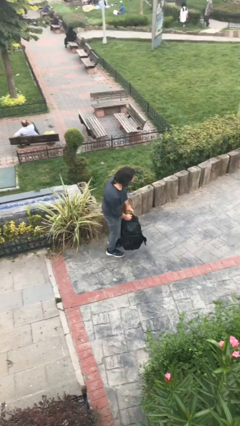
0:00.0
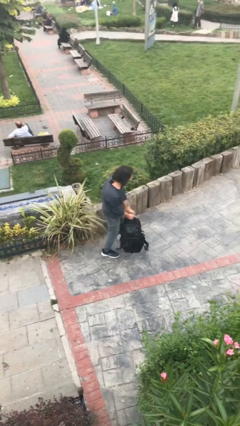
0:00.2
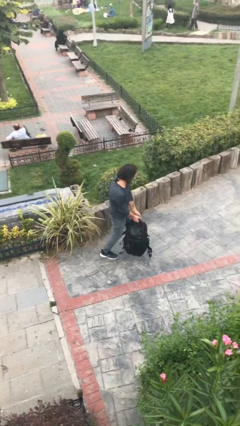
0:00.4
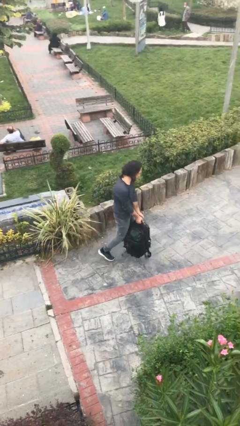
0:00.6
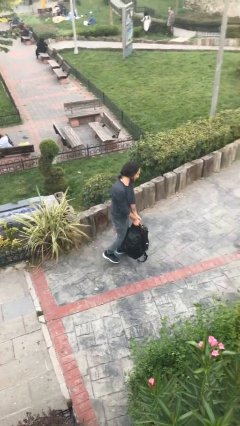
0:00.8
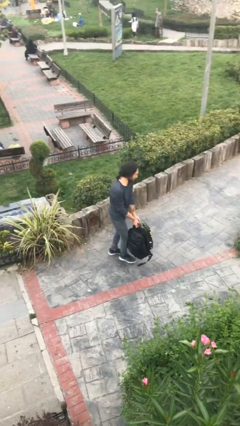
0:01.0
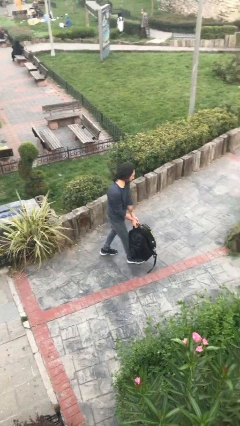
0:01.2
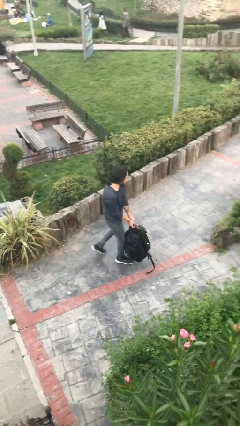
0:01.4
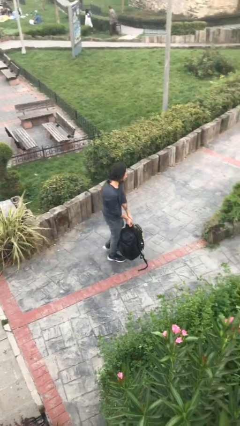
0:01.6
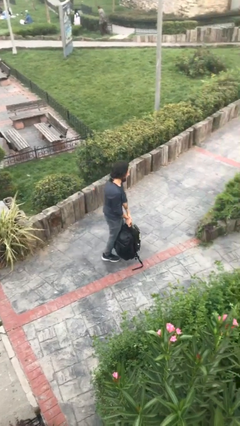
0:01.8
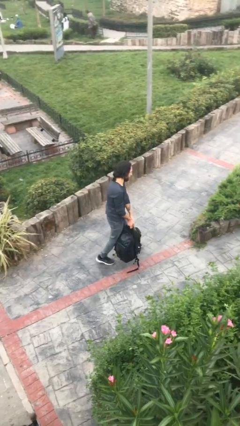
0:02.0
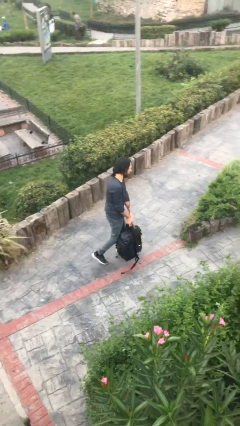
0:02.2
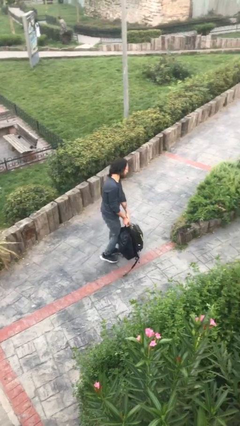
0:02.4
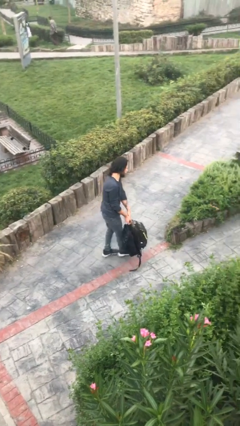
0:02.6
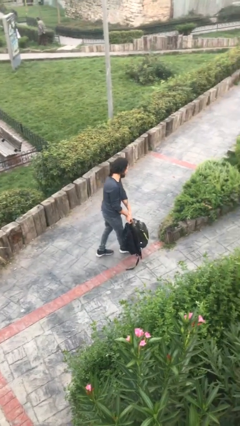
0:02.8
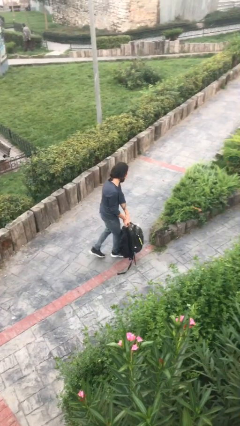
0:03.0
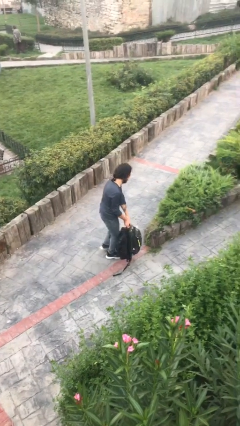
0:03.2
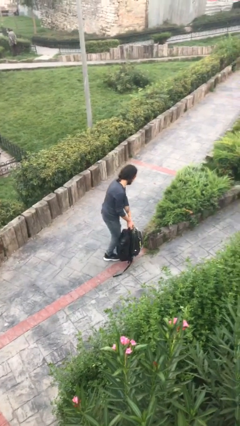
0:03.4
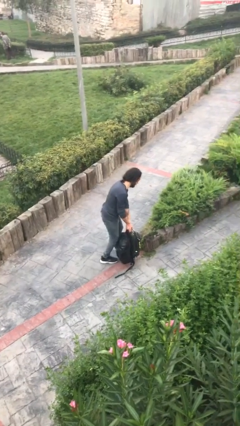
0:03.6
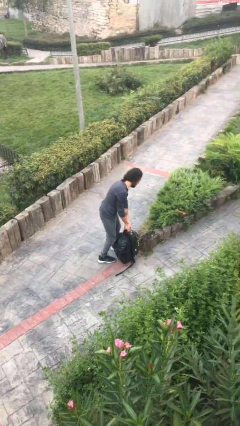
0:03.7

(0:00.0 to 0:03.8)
person carries heavy object

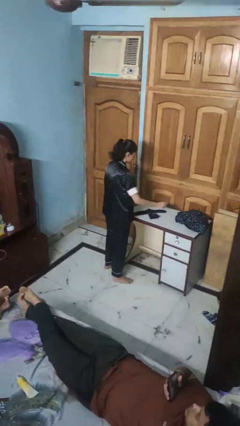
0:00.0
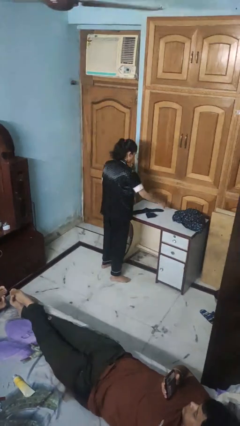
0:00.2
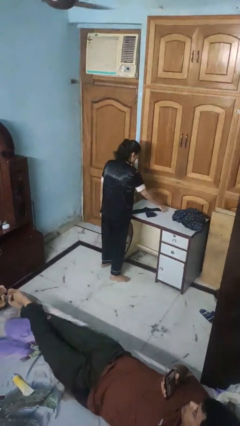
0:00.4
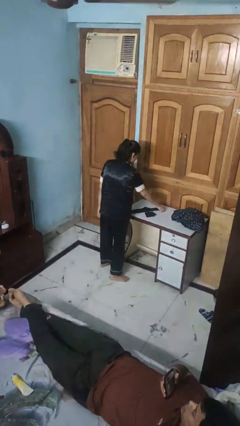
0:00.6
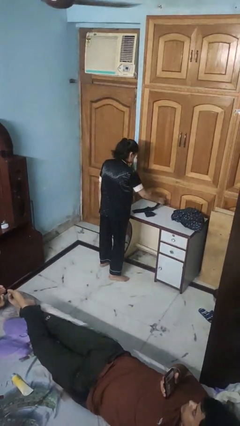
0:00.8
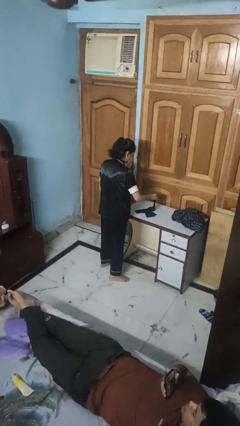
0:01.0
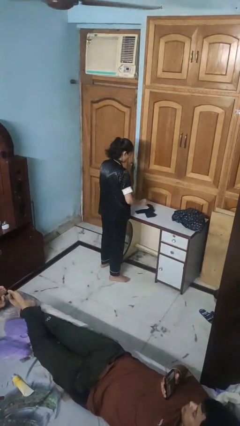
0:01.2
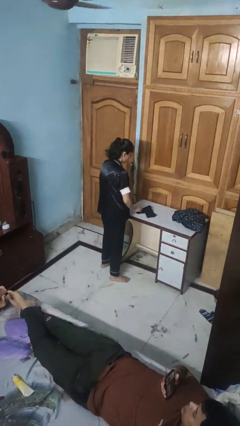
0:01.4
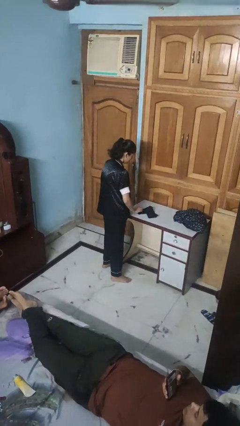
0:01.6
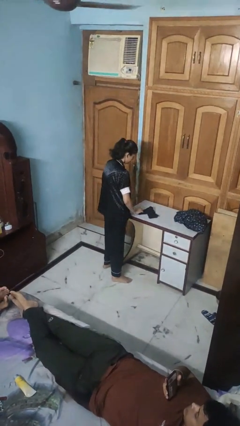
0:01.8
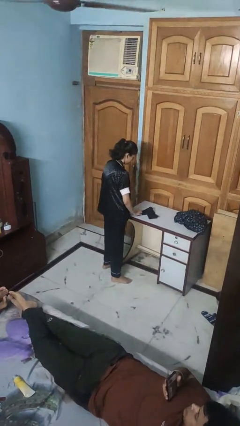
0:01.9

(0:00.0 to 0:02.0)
person folds socks

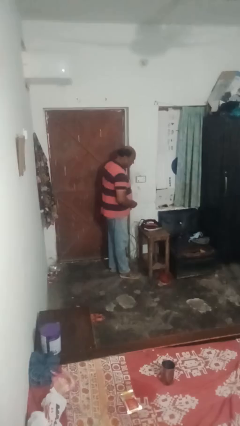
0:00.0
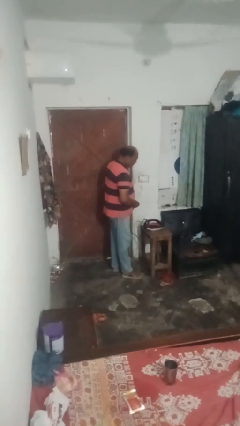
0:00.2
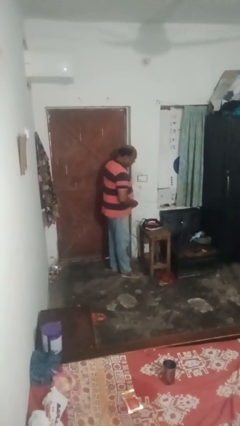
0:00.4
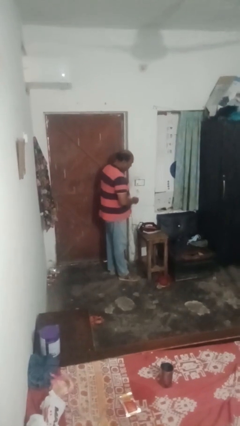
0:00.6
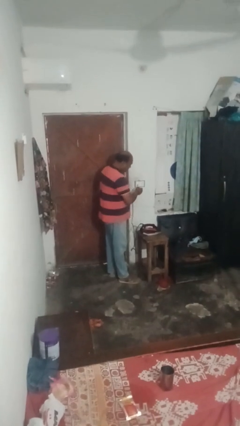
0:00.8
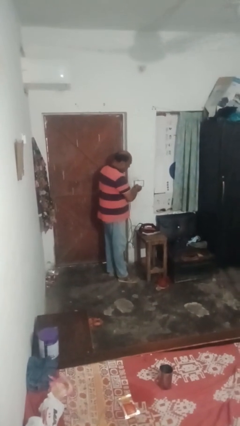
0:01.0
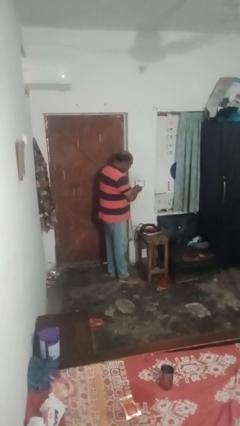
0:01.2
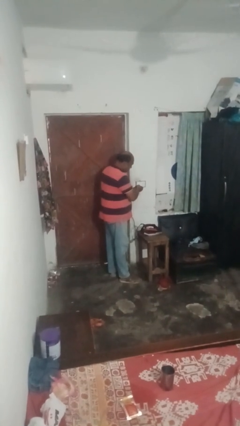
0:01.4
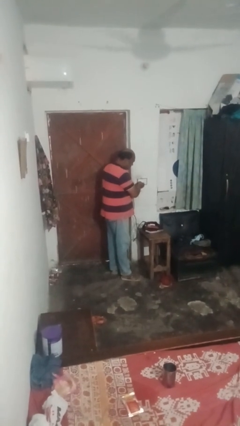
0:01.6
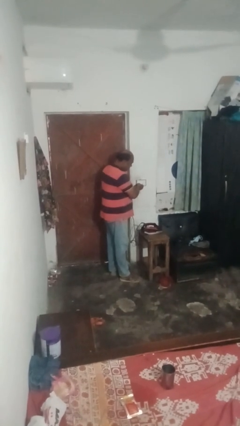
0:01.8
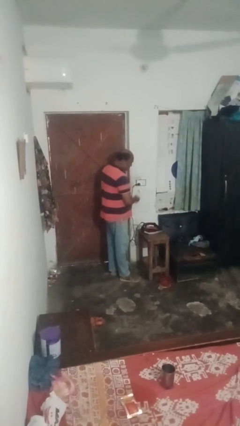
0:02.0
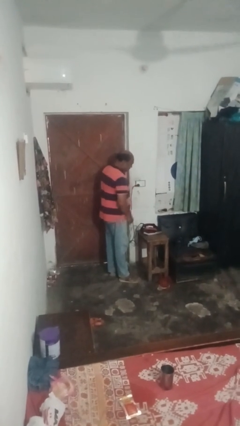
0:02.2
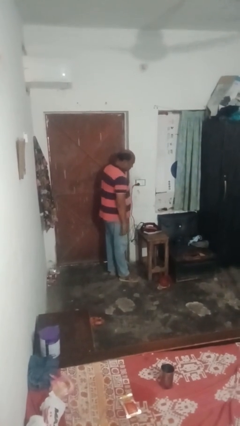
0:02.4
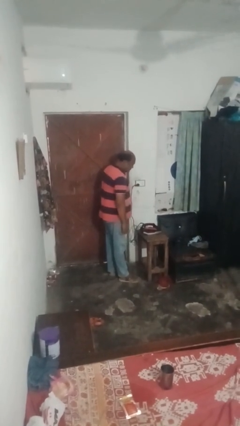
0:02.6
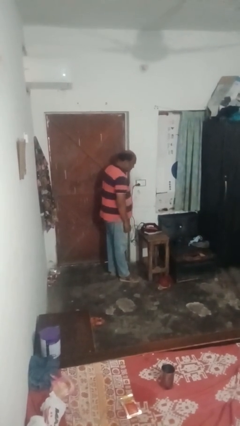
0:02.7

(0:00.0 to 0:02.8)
person plugs into electrical socket

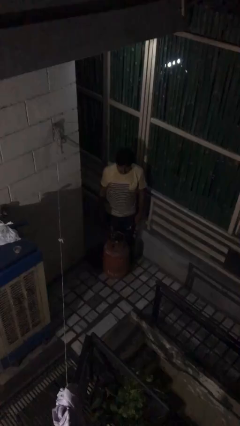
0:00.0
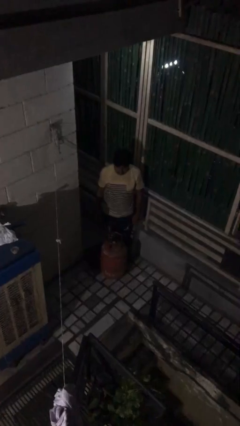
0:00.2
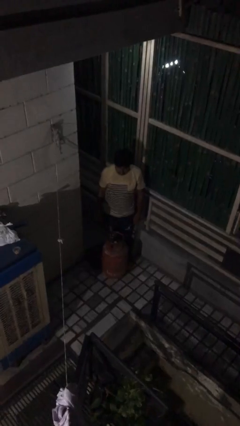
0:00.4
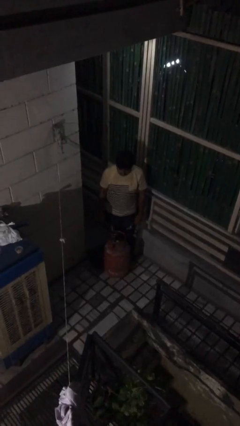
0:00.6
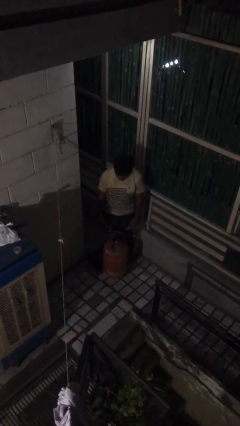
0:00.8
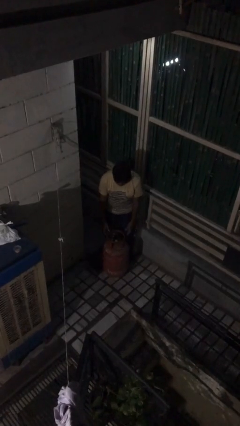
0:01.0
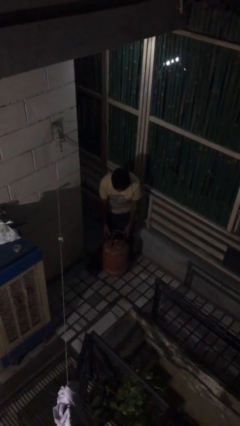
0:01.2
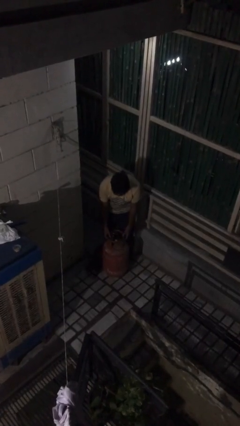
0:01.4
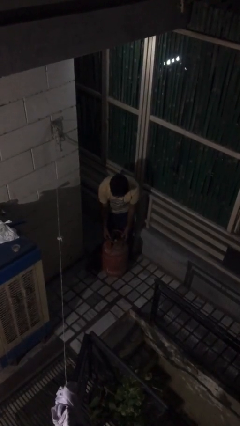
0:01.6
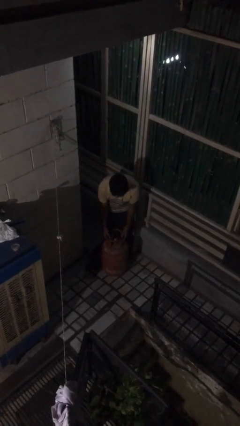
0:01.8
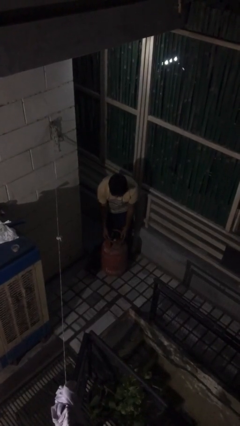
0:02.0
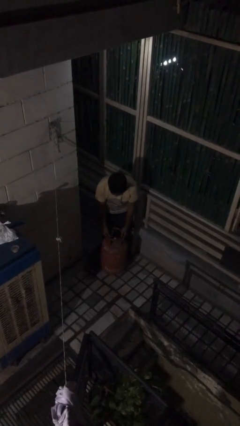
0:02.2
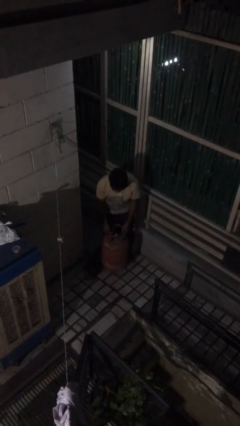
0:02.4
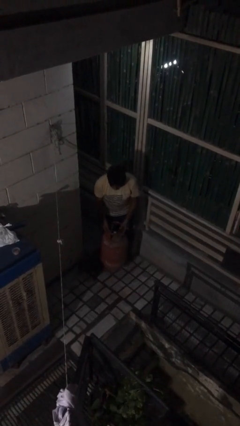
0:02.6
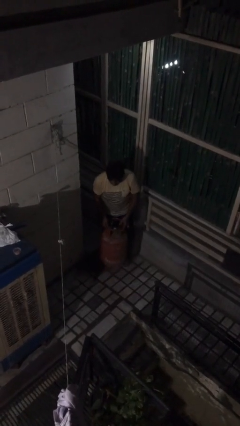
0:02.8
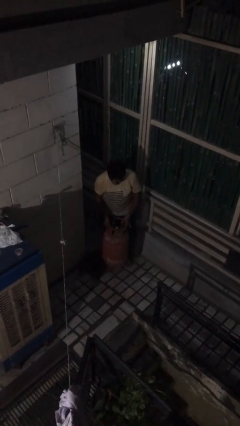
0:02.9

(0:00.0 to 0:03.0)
person picks up object from floor

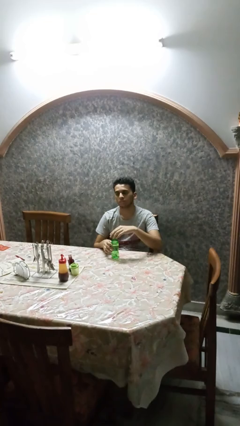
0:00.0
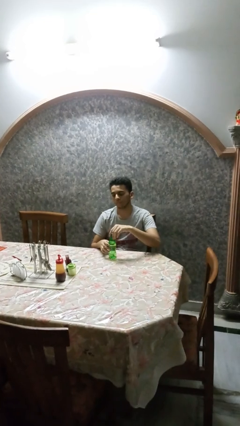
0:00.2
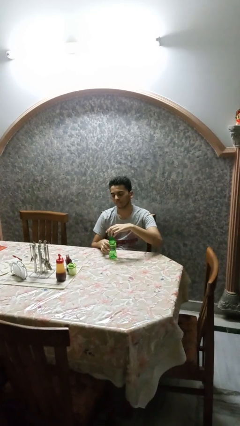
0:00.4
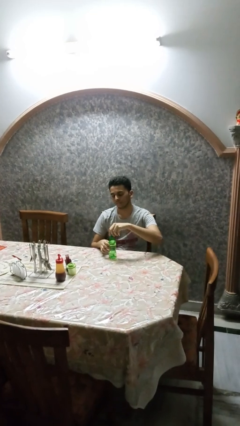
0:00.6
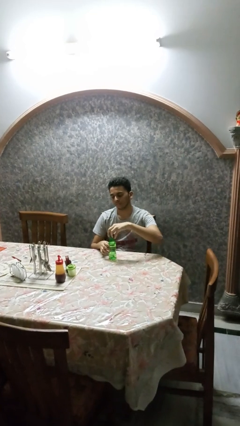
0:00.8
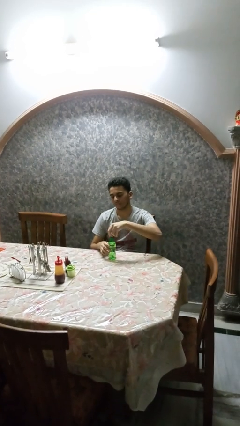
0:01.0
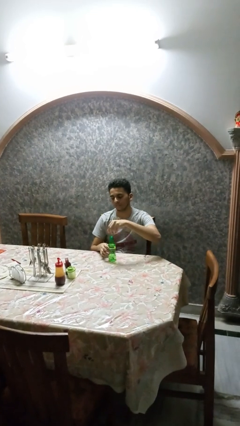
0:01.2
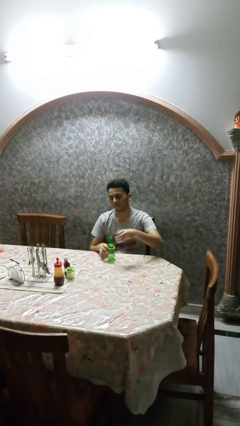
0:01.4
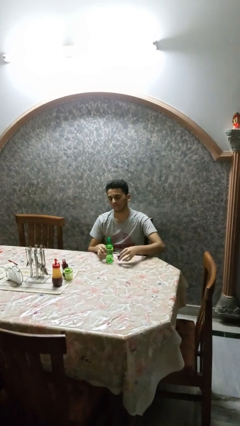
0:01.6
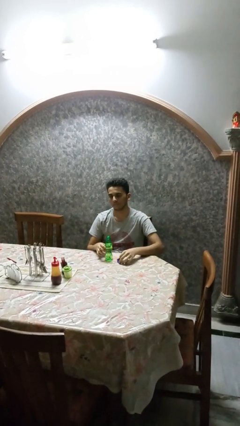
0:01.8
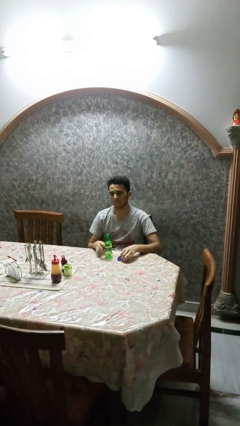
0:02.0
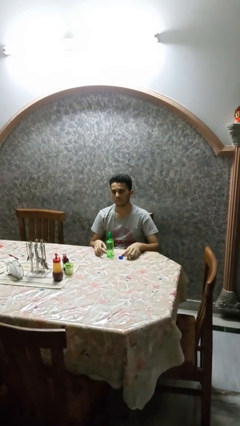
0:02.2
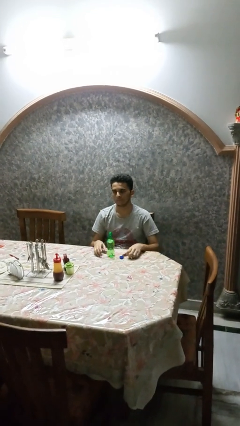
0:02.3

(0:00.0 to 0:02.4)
person unscrews lid from bottle

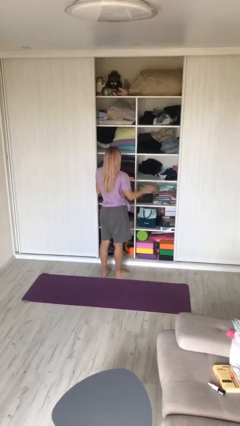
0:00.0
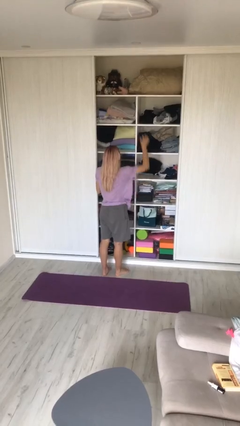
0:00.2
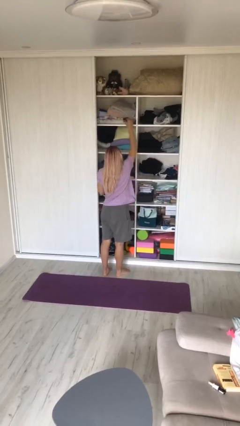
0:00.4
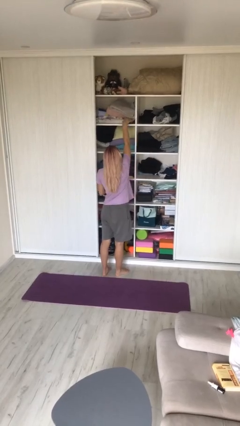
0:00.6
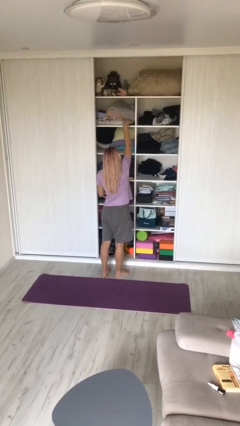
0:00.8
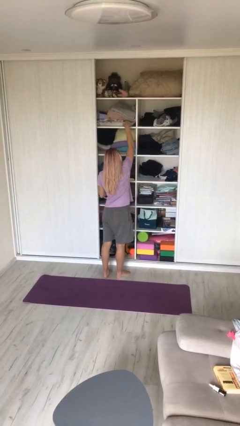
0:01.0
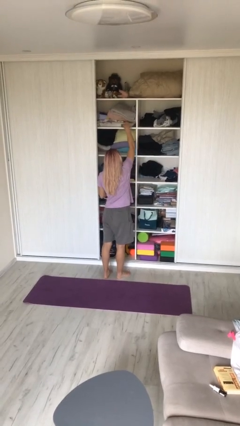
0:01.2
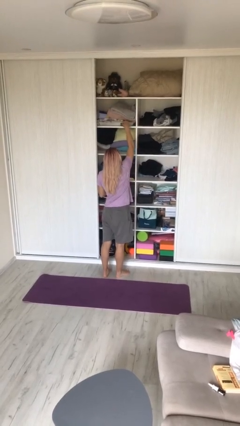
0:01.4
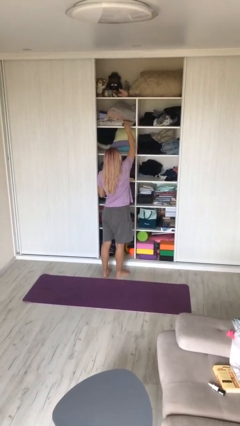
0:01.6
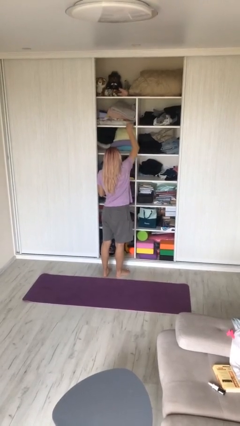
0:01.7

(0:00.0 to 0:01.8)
person dusts furniture

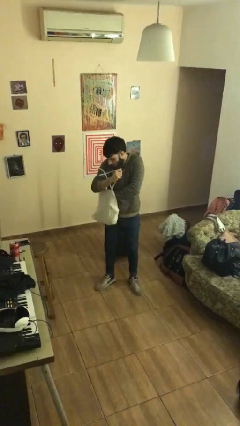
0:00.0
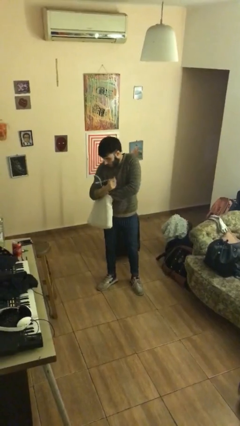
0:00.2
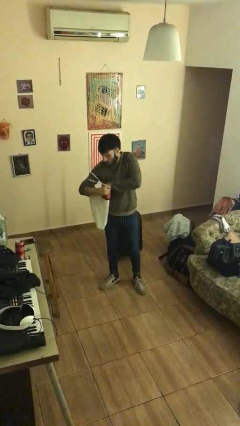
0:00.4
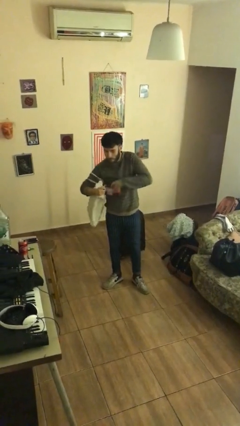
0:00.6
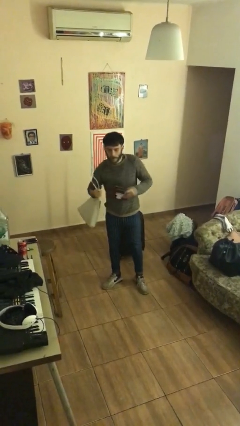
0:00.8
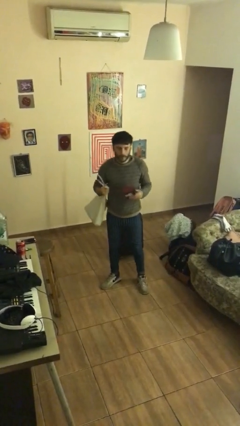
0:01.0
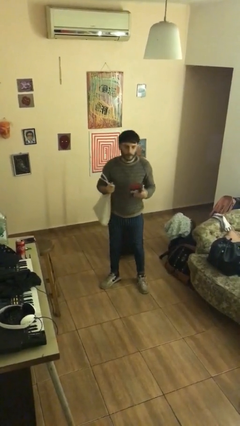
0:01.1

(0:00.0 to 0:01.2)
person takes object from purse

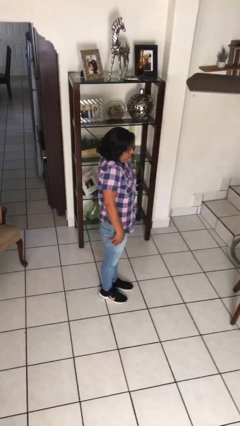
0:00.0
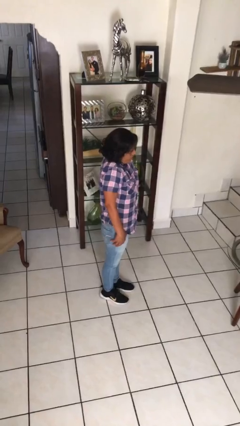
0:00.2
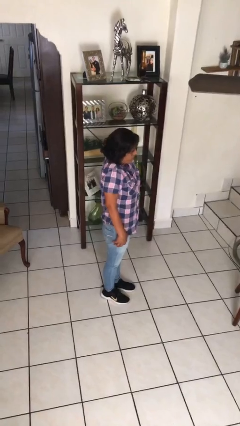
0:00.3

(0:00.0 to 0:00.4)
person shrugs
